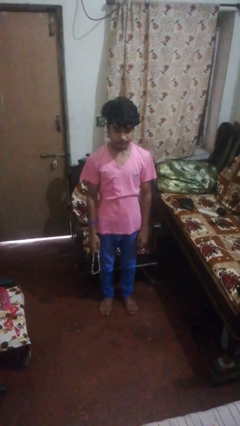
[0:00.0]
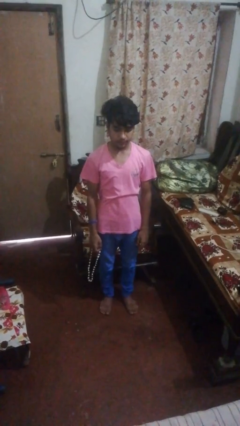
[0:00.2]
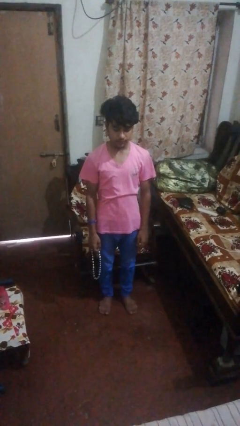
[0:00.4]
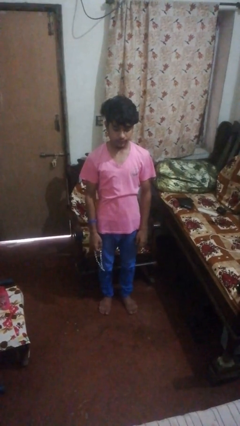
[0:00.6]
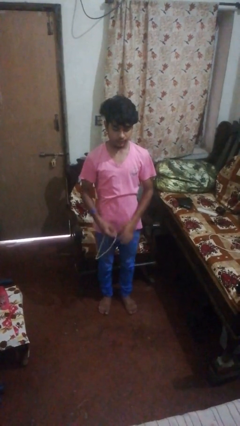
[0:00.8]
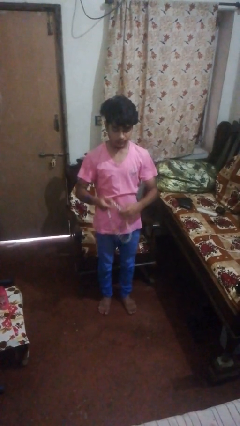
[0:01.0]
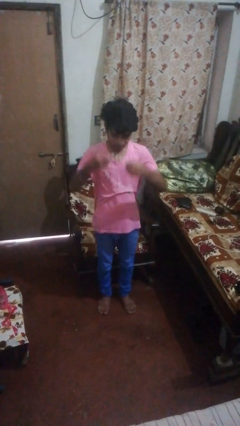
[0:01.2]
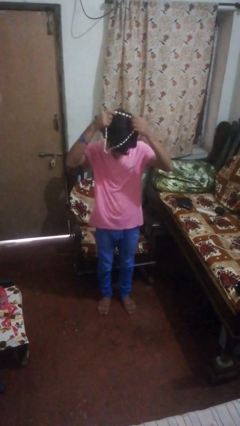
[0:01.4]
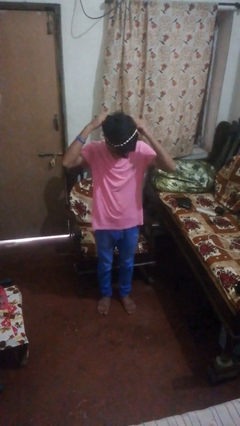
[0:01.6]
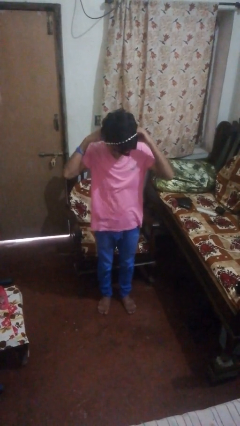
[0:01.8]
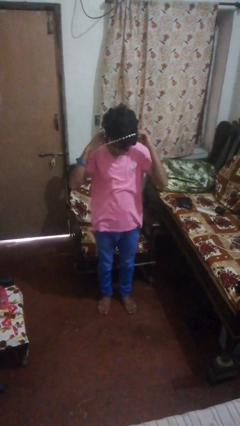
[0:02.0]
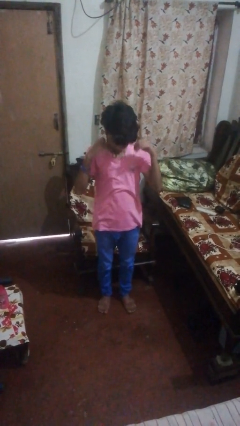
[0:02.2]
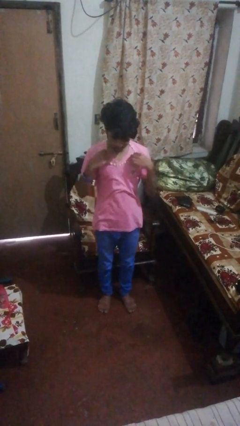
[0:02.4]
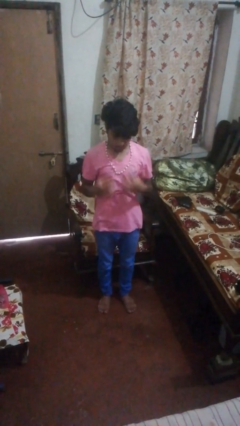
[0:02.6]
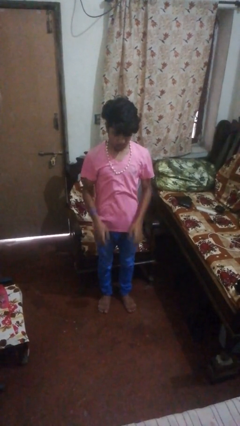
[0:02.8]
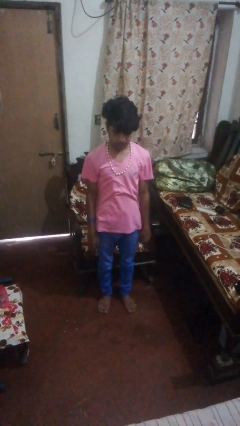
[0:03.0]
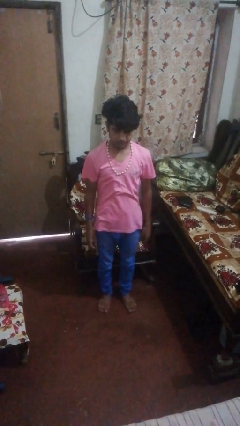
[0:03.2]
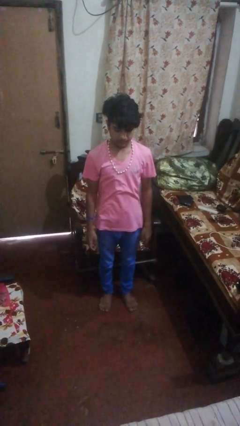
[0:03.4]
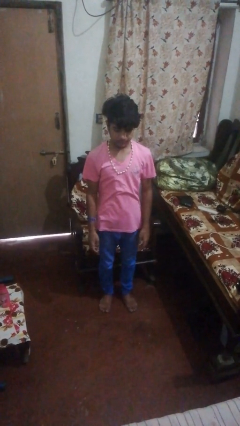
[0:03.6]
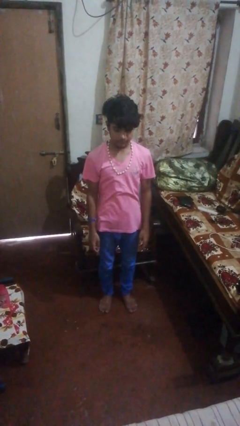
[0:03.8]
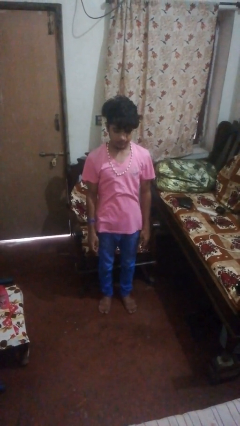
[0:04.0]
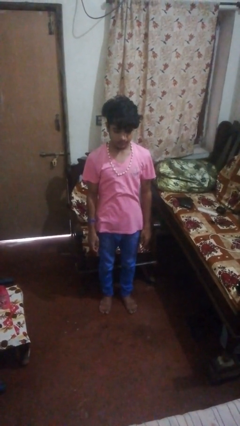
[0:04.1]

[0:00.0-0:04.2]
person puts on necklace

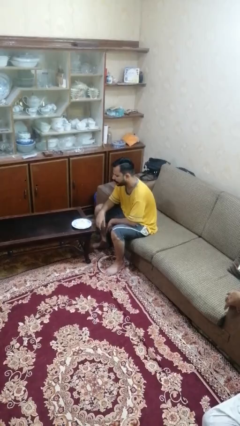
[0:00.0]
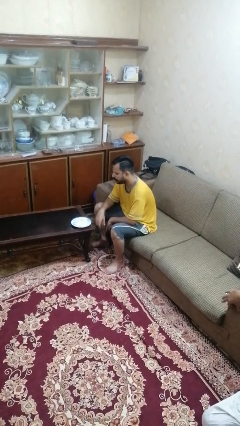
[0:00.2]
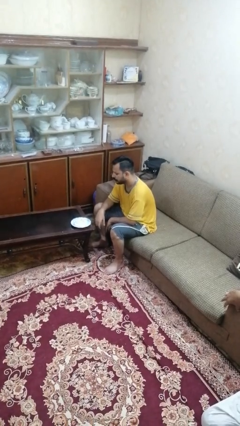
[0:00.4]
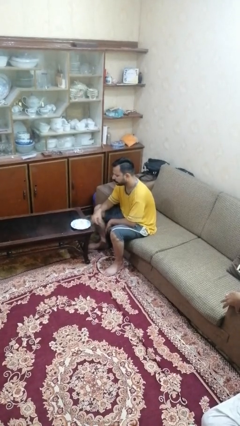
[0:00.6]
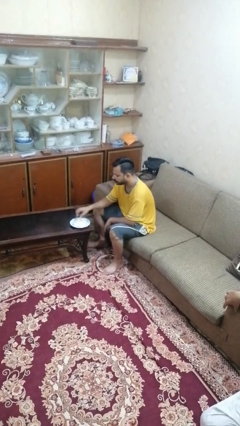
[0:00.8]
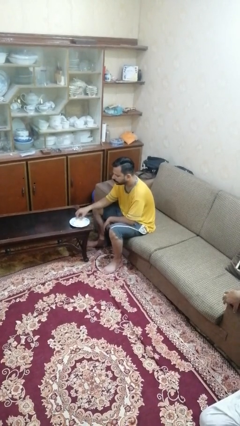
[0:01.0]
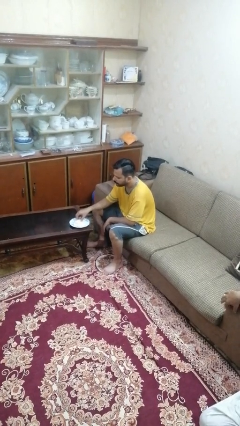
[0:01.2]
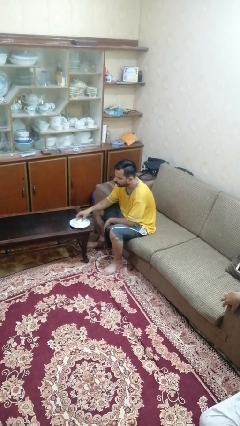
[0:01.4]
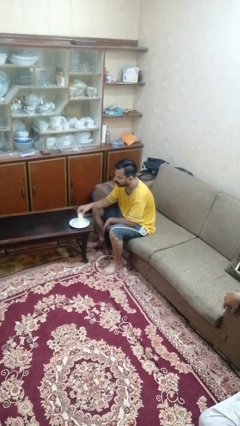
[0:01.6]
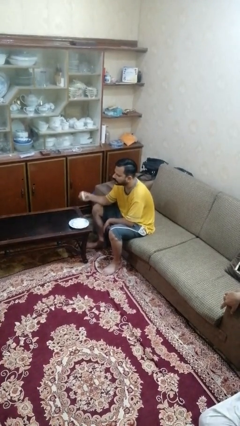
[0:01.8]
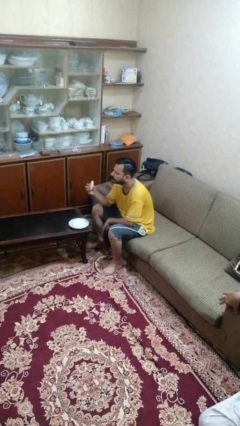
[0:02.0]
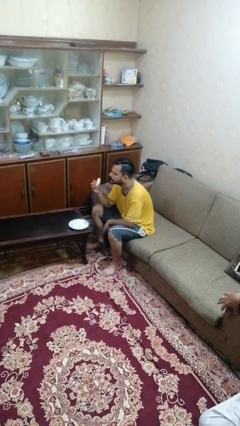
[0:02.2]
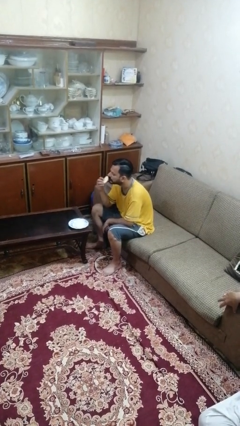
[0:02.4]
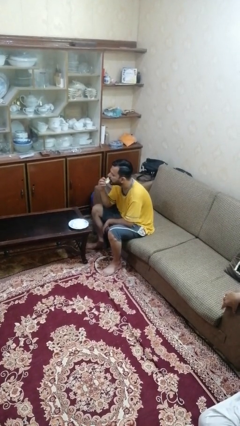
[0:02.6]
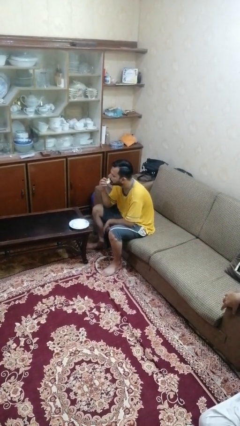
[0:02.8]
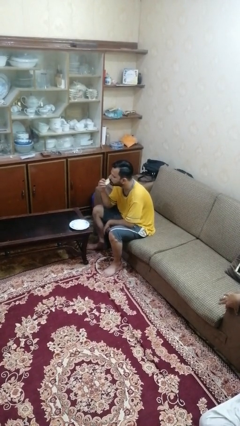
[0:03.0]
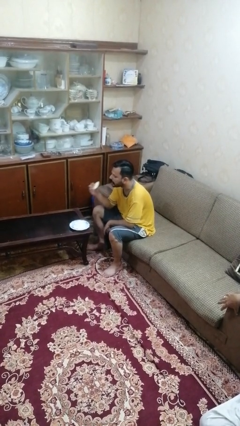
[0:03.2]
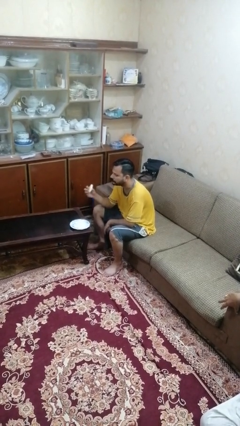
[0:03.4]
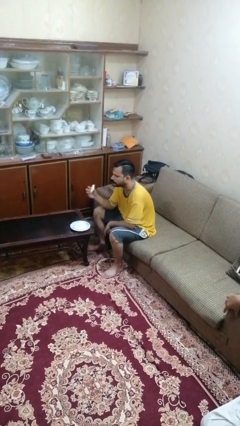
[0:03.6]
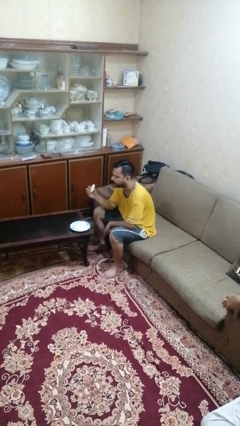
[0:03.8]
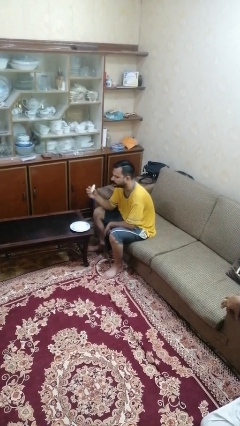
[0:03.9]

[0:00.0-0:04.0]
person eats with hands

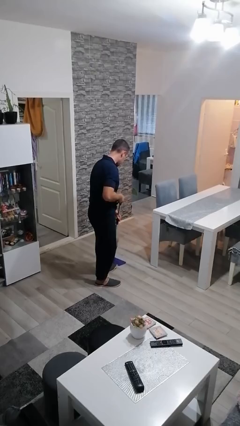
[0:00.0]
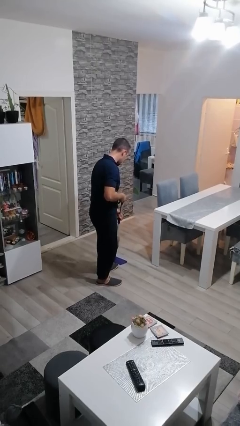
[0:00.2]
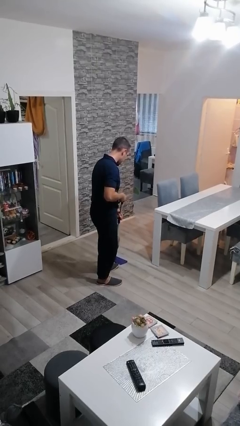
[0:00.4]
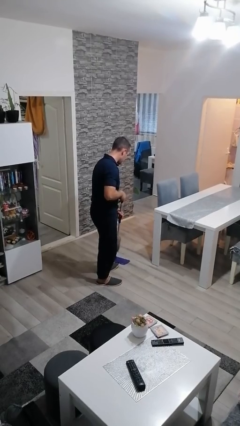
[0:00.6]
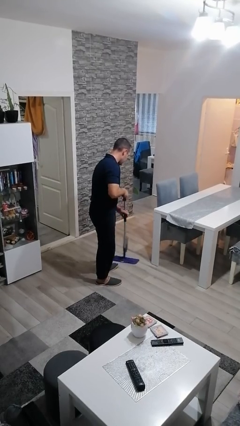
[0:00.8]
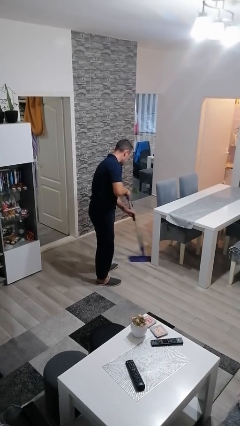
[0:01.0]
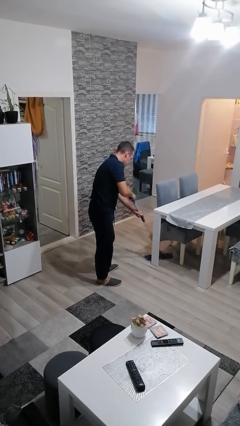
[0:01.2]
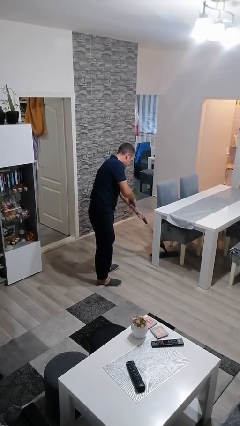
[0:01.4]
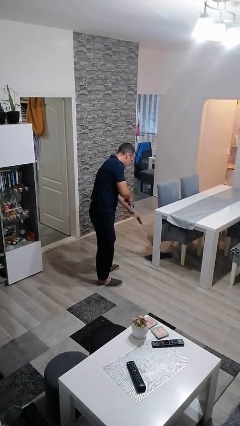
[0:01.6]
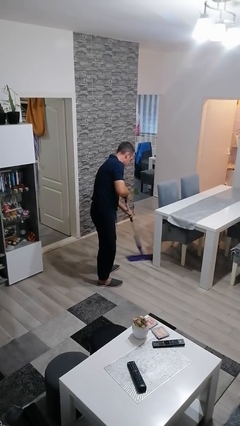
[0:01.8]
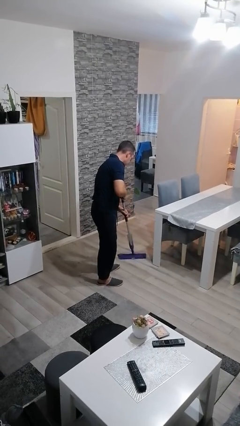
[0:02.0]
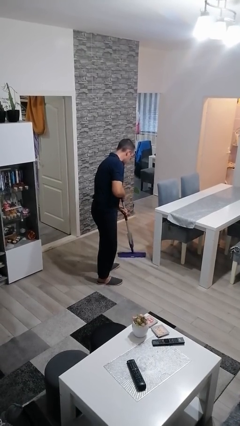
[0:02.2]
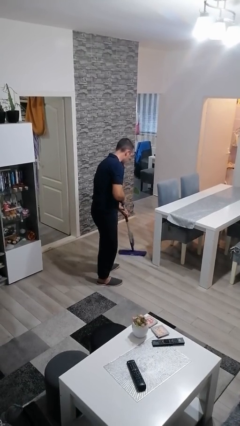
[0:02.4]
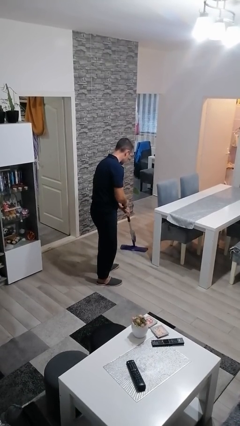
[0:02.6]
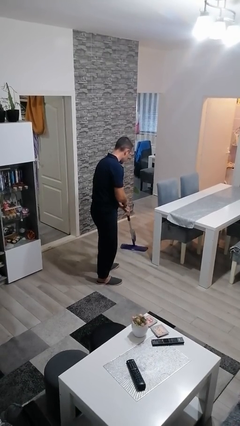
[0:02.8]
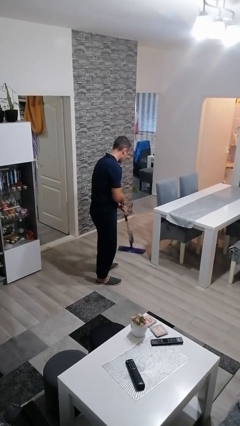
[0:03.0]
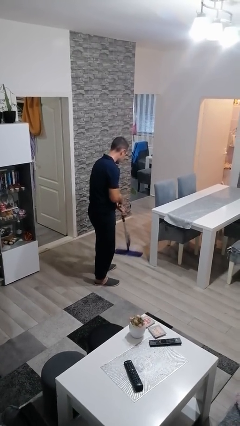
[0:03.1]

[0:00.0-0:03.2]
person mops

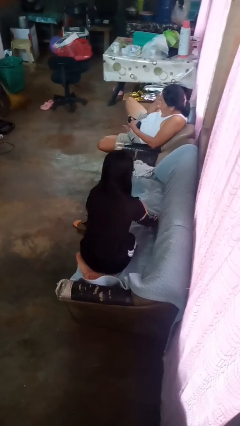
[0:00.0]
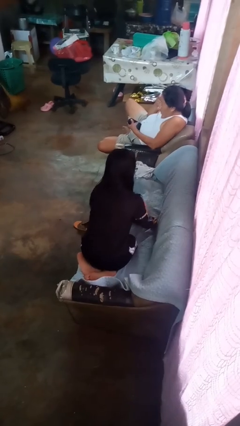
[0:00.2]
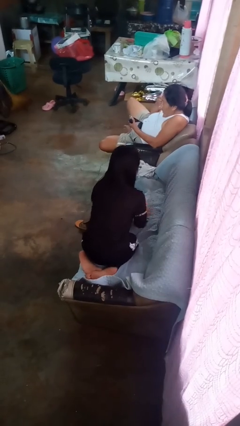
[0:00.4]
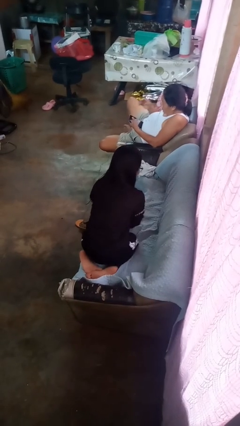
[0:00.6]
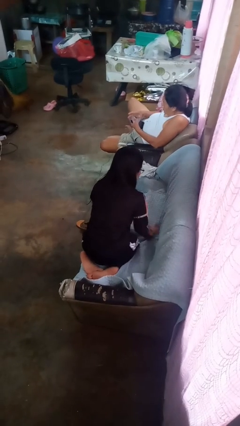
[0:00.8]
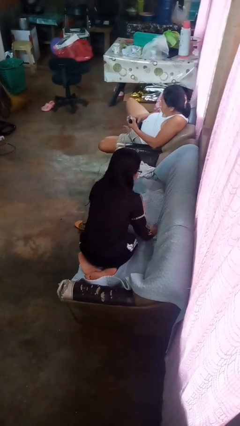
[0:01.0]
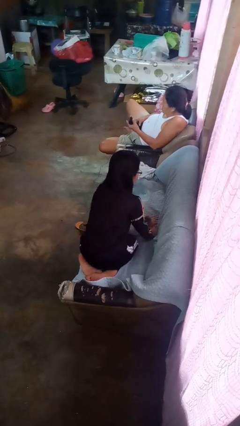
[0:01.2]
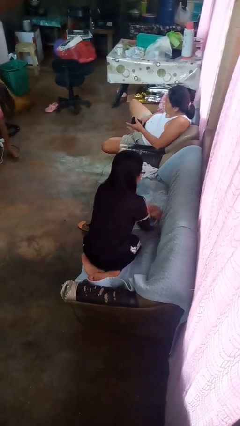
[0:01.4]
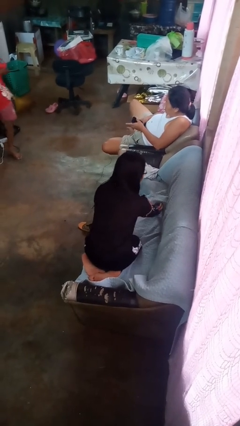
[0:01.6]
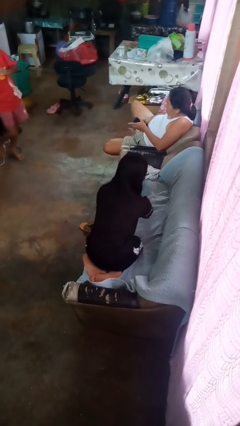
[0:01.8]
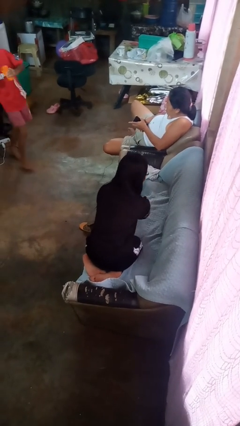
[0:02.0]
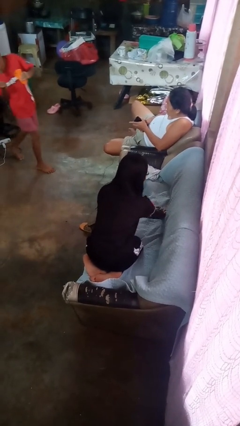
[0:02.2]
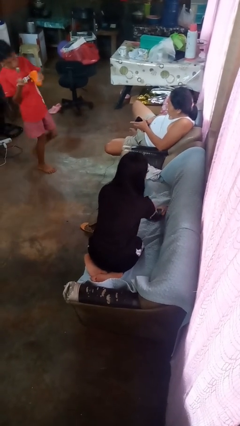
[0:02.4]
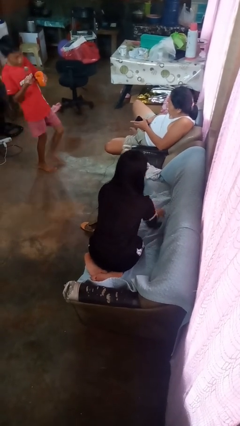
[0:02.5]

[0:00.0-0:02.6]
person searches in couch

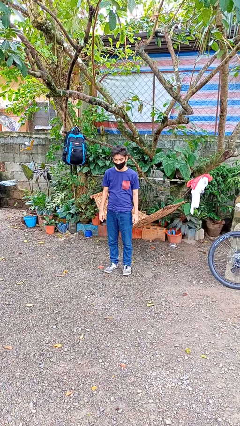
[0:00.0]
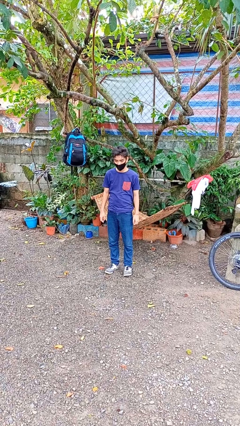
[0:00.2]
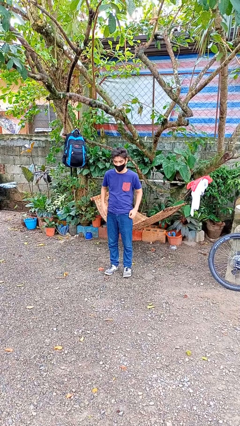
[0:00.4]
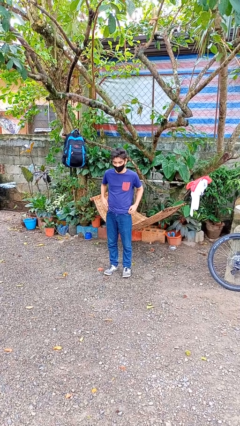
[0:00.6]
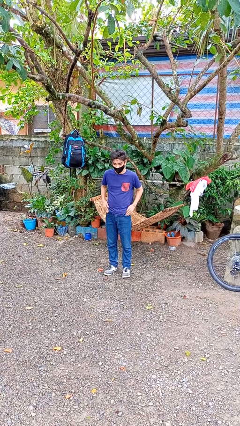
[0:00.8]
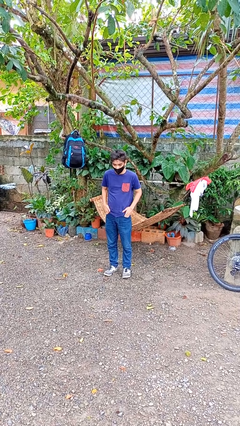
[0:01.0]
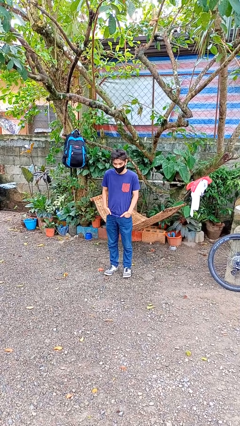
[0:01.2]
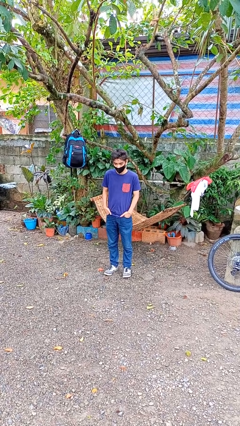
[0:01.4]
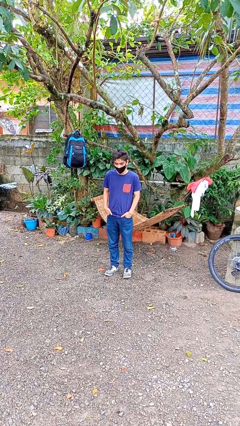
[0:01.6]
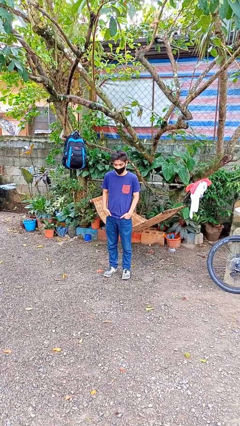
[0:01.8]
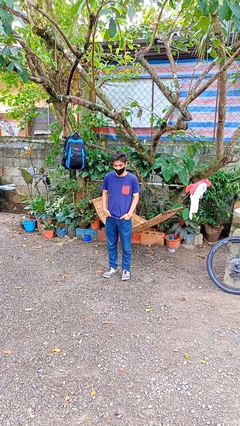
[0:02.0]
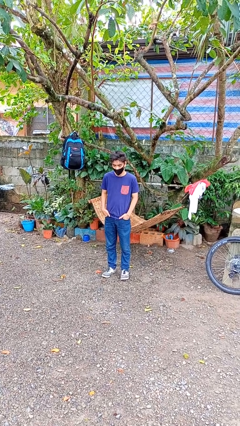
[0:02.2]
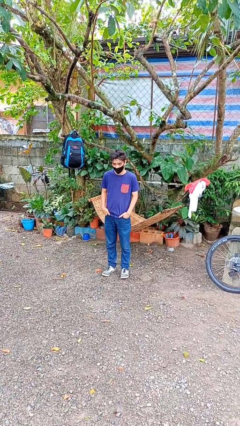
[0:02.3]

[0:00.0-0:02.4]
person puts hands in back pockets

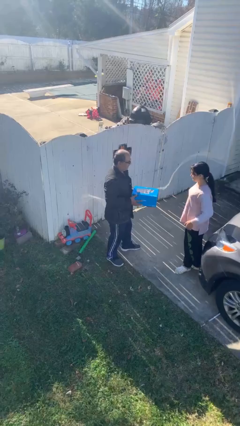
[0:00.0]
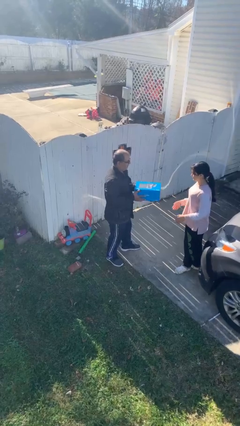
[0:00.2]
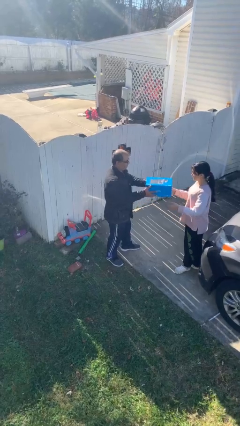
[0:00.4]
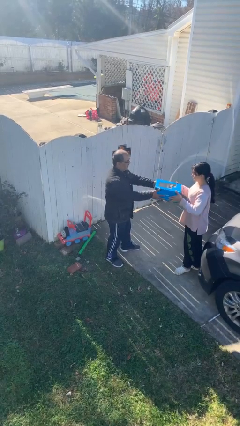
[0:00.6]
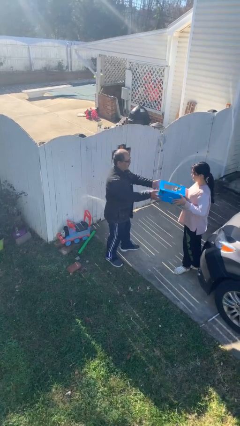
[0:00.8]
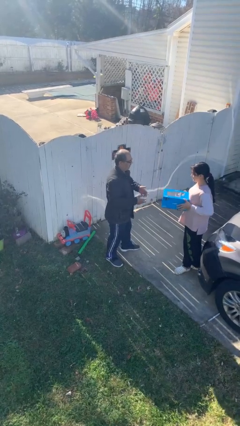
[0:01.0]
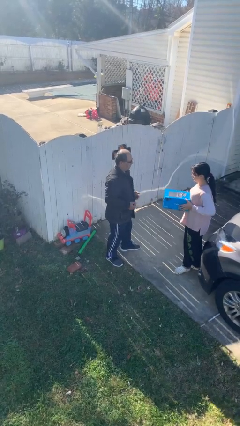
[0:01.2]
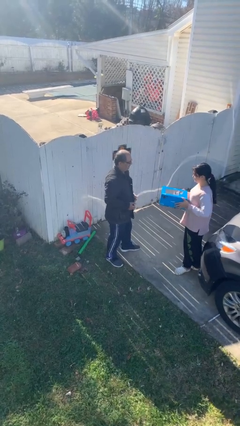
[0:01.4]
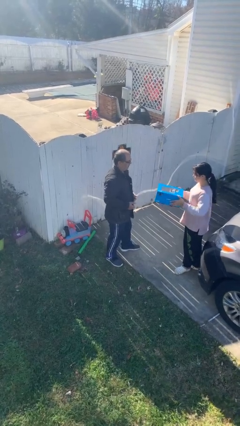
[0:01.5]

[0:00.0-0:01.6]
person transfers object to person
